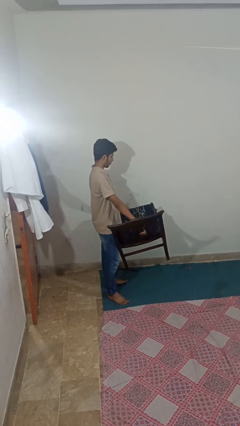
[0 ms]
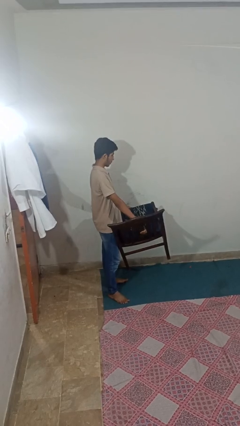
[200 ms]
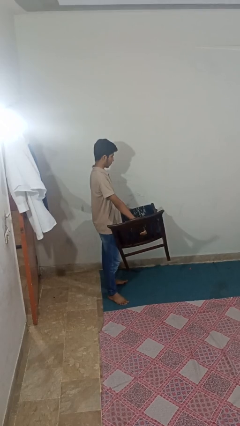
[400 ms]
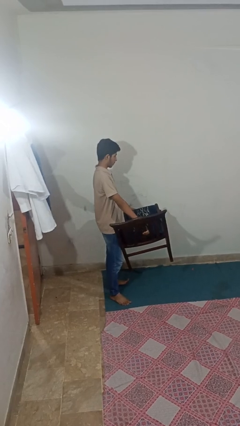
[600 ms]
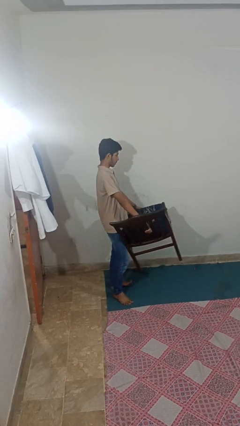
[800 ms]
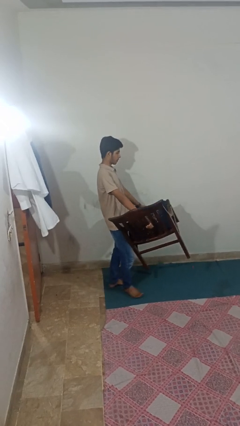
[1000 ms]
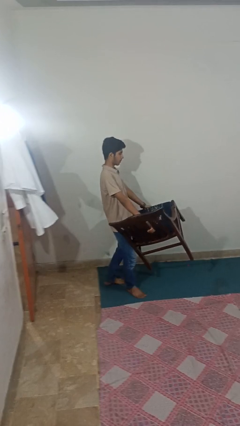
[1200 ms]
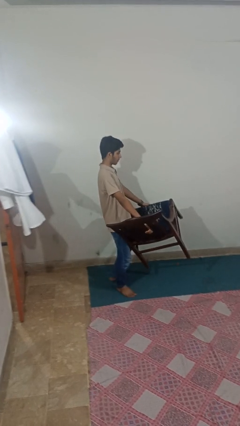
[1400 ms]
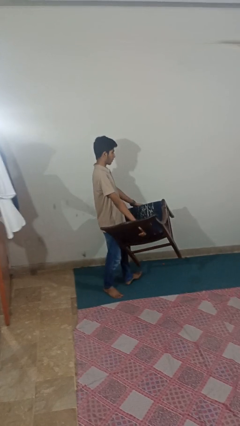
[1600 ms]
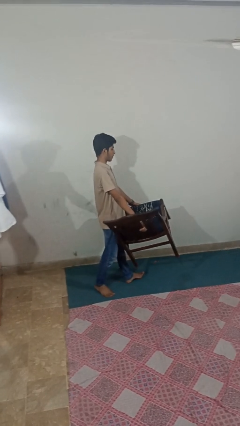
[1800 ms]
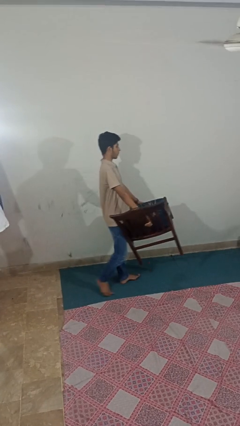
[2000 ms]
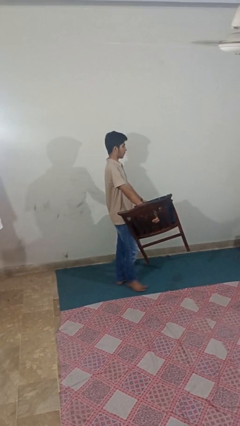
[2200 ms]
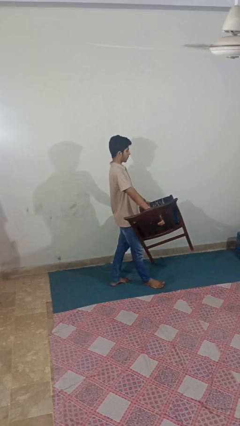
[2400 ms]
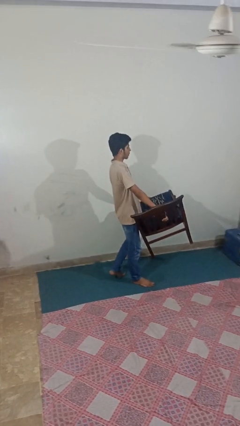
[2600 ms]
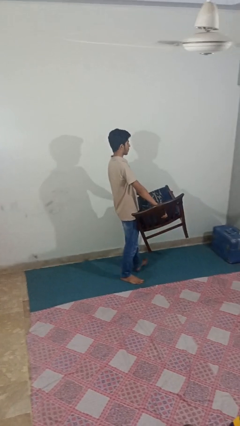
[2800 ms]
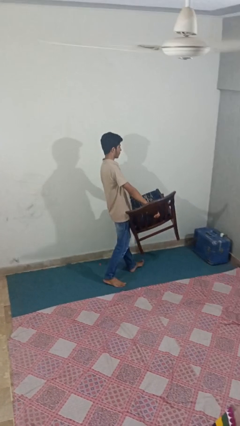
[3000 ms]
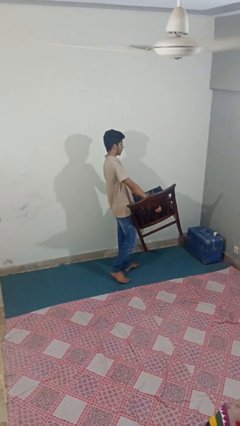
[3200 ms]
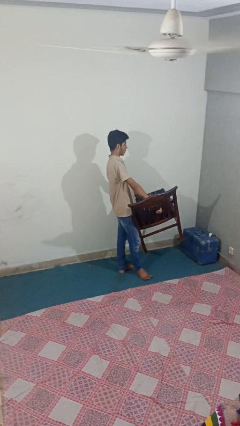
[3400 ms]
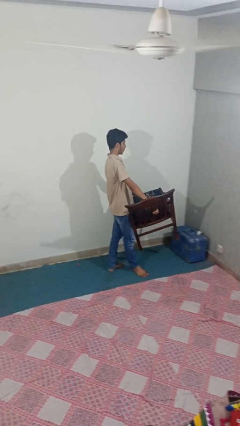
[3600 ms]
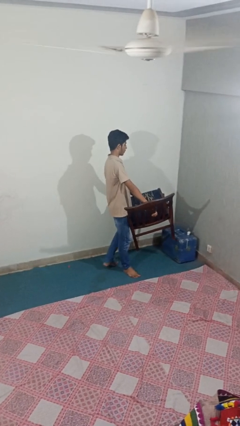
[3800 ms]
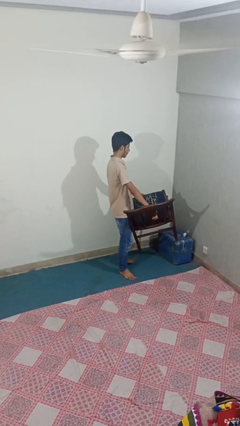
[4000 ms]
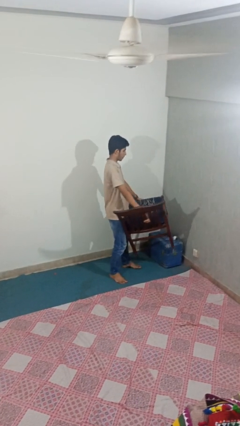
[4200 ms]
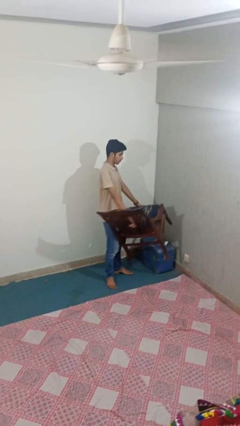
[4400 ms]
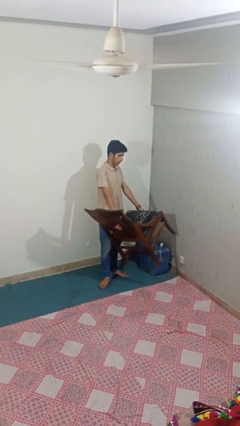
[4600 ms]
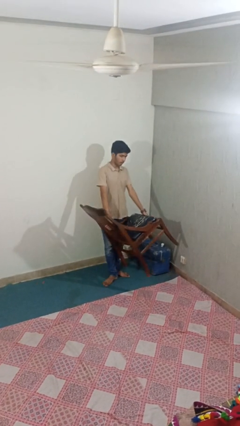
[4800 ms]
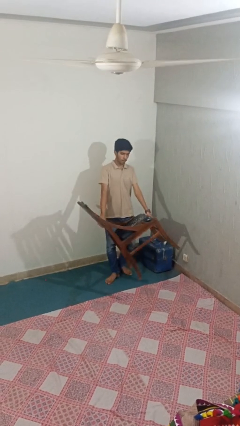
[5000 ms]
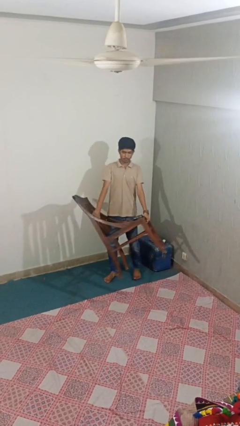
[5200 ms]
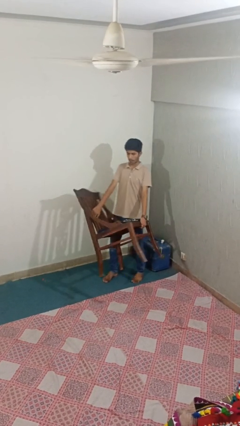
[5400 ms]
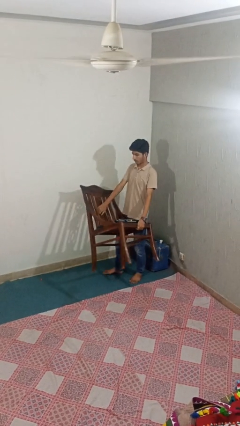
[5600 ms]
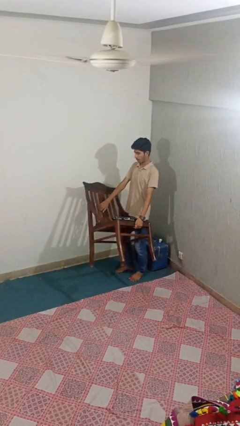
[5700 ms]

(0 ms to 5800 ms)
person carries furniture

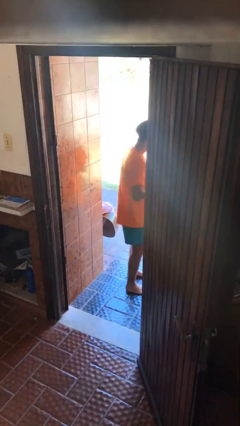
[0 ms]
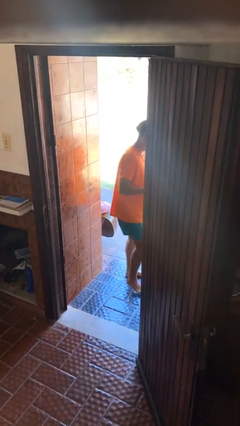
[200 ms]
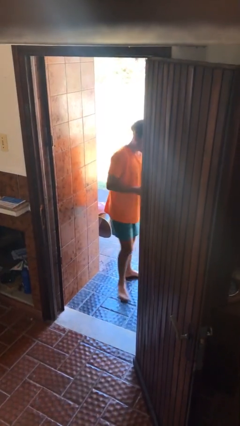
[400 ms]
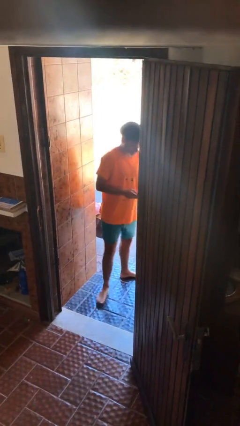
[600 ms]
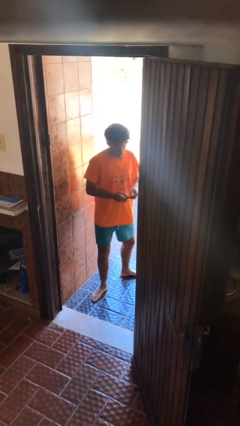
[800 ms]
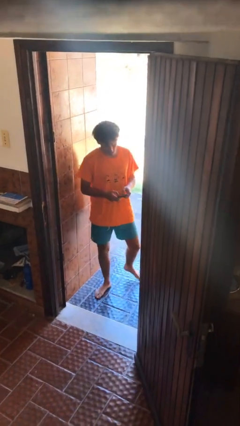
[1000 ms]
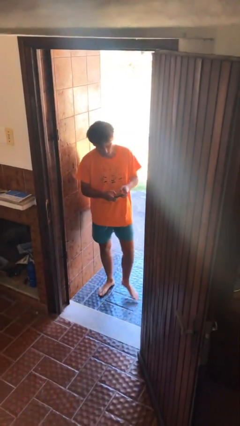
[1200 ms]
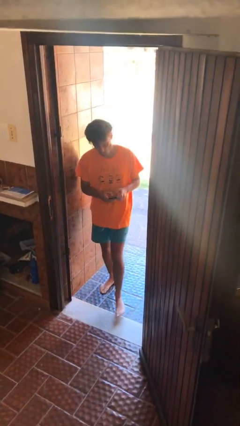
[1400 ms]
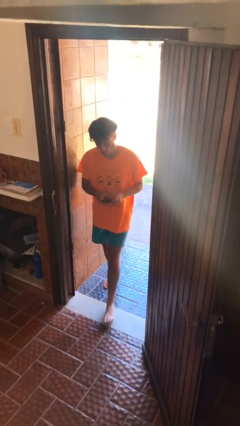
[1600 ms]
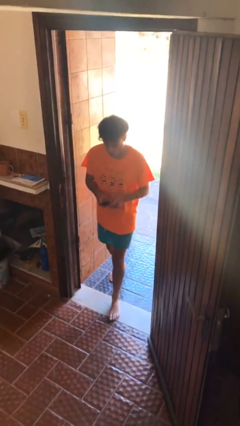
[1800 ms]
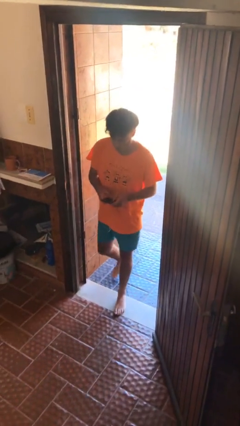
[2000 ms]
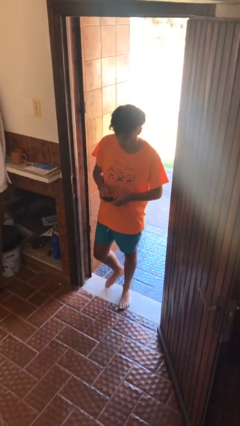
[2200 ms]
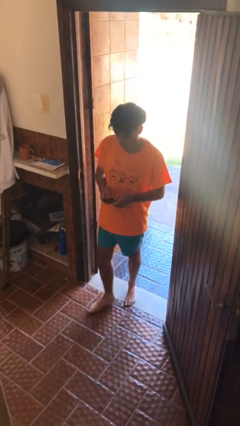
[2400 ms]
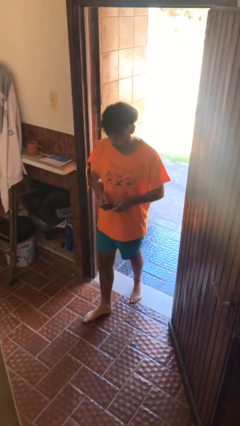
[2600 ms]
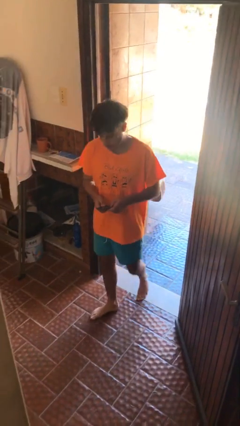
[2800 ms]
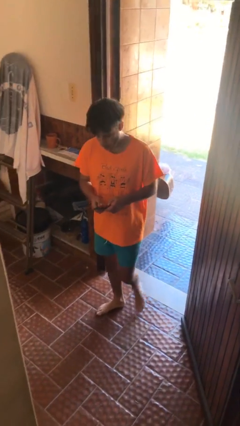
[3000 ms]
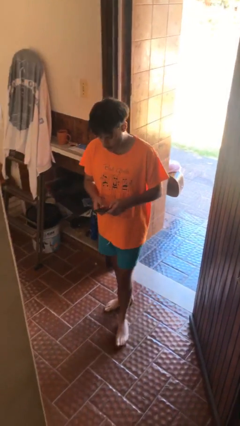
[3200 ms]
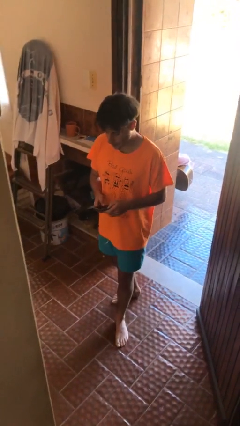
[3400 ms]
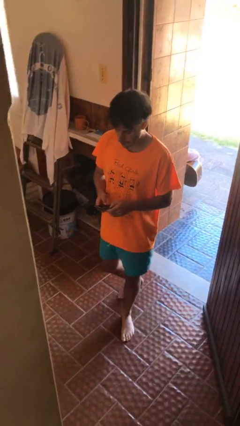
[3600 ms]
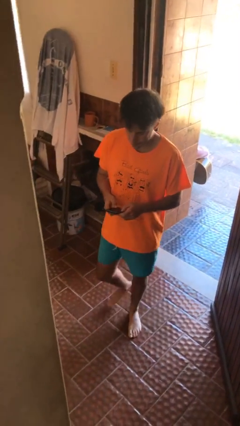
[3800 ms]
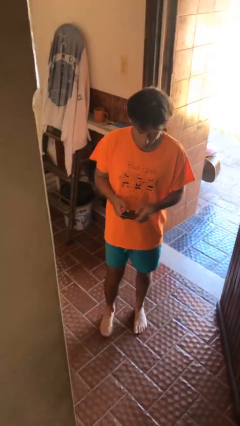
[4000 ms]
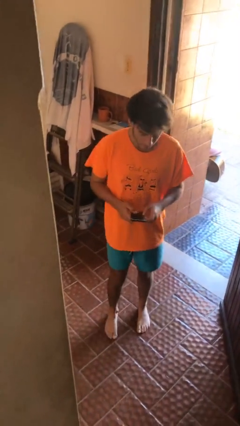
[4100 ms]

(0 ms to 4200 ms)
person enters scene through structure

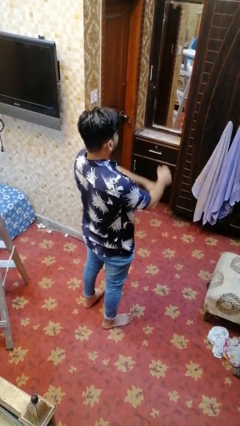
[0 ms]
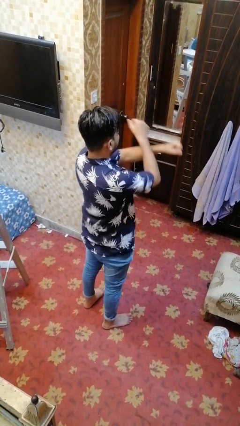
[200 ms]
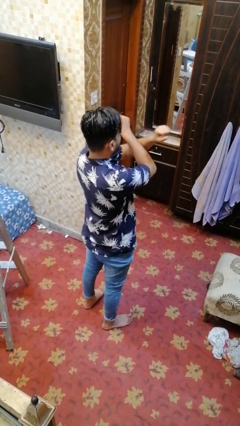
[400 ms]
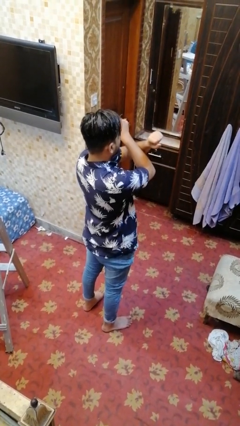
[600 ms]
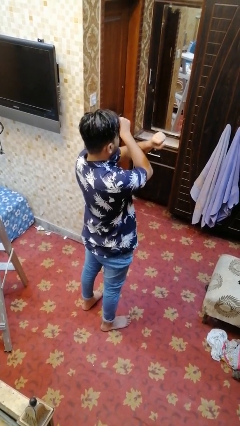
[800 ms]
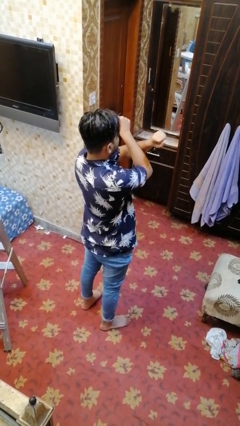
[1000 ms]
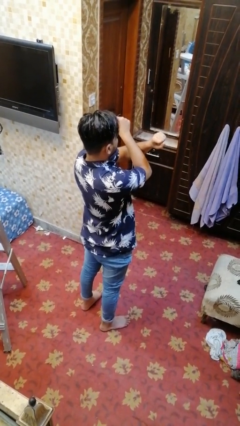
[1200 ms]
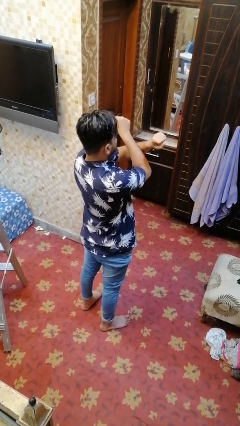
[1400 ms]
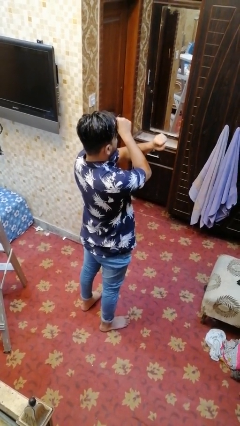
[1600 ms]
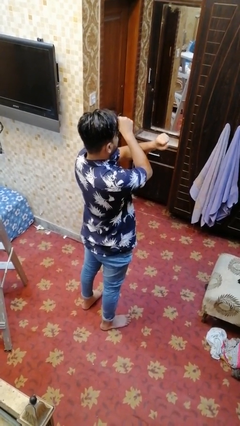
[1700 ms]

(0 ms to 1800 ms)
person crosses arms

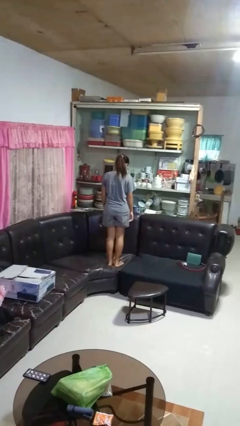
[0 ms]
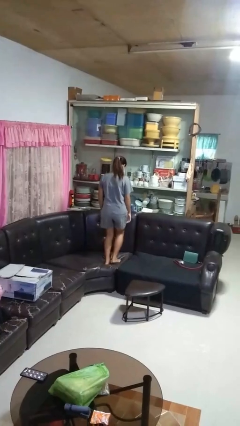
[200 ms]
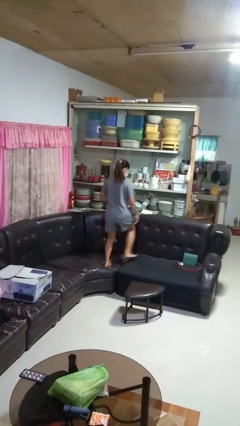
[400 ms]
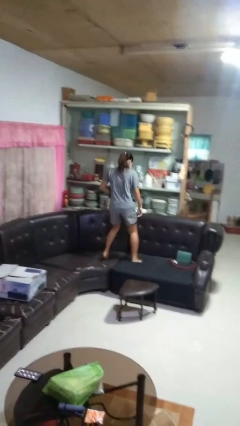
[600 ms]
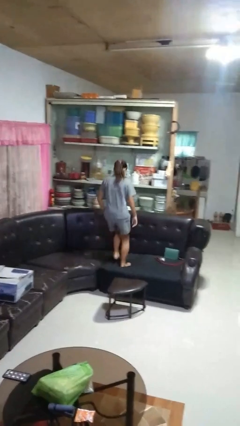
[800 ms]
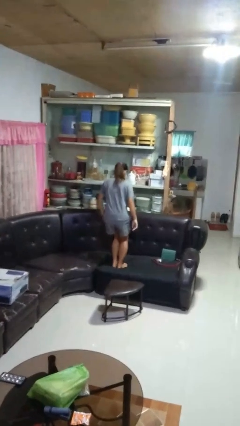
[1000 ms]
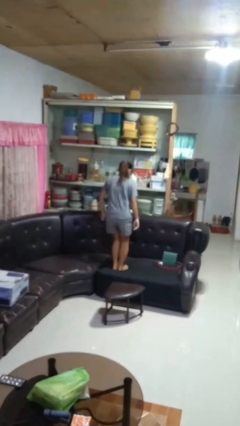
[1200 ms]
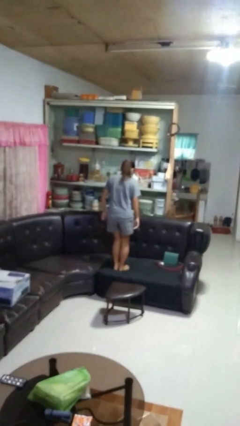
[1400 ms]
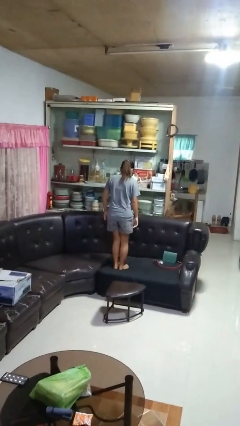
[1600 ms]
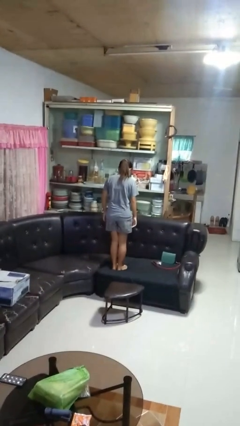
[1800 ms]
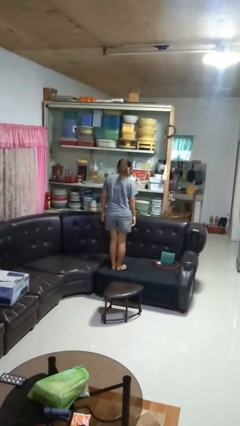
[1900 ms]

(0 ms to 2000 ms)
person jumps on couch

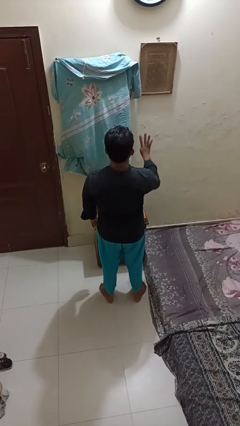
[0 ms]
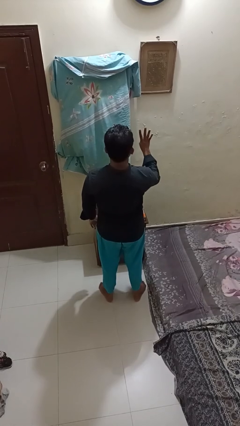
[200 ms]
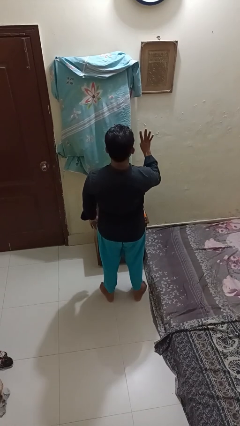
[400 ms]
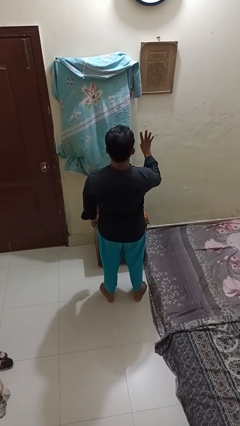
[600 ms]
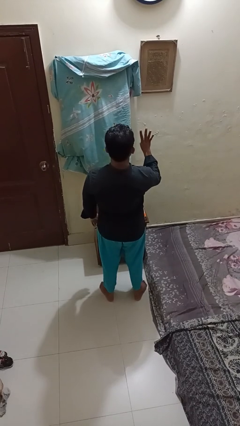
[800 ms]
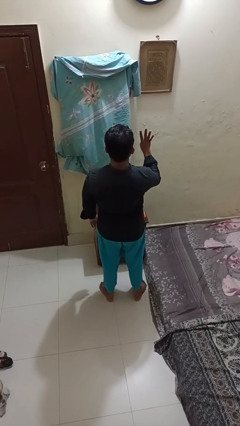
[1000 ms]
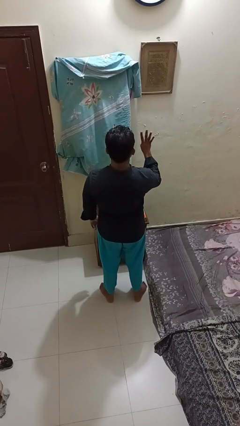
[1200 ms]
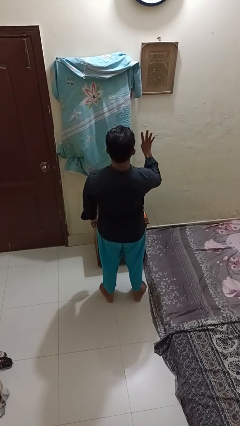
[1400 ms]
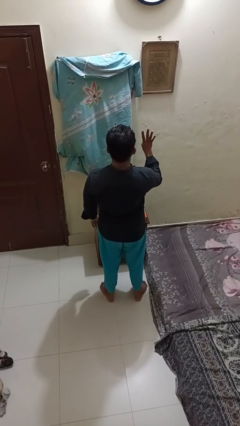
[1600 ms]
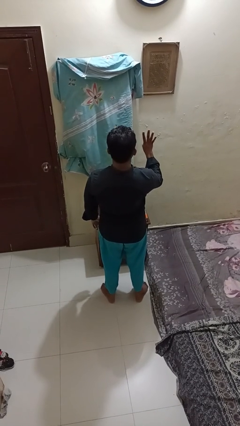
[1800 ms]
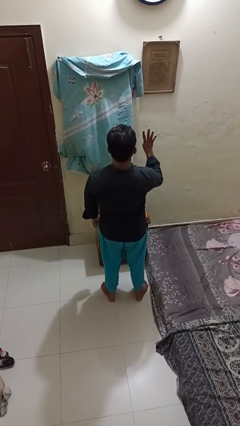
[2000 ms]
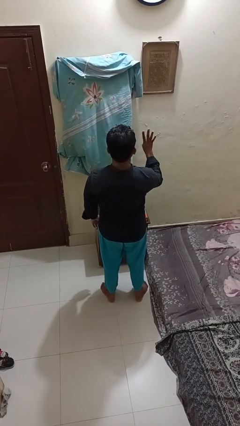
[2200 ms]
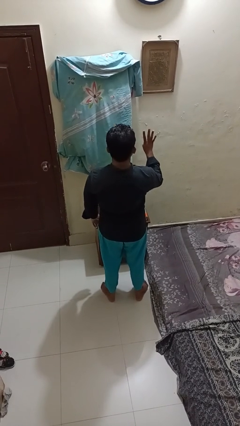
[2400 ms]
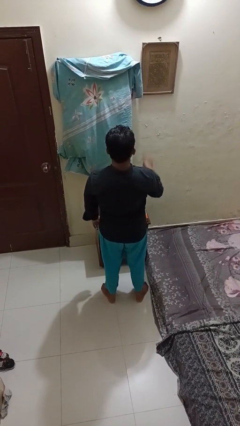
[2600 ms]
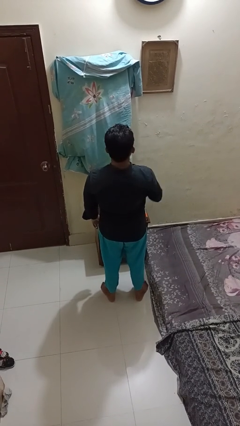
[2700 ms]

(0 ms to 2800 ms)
person gestures number four

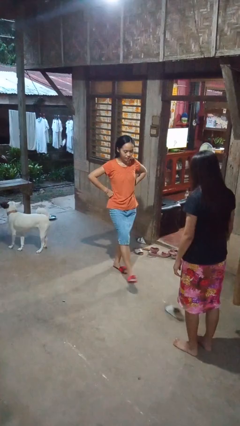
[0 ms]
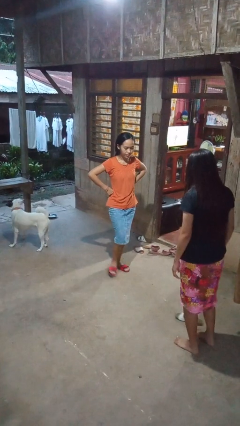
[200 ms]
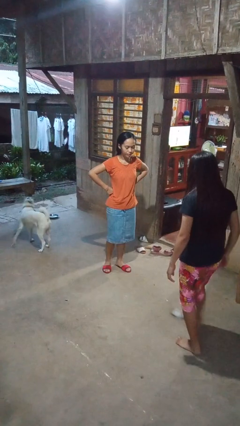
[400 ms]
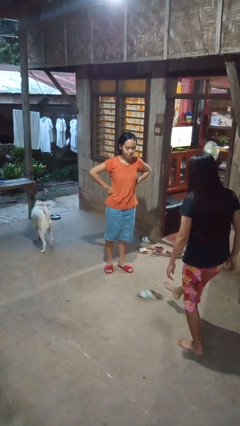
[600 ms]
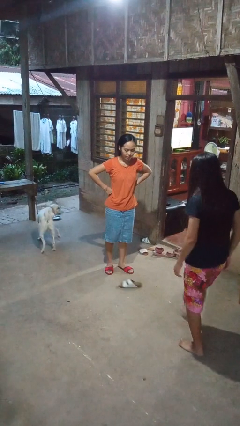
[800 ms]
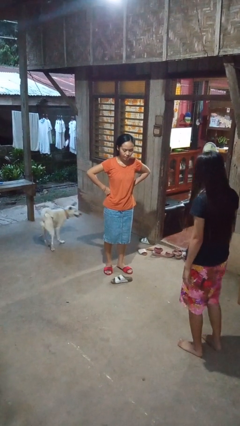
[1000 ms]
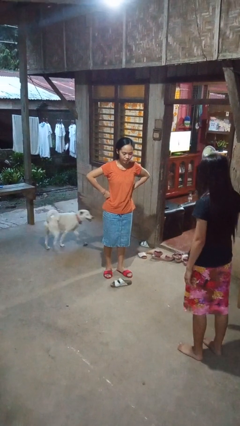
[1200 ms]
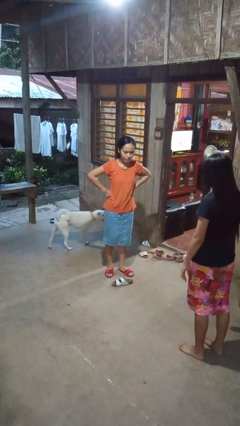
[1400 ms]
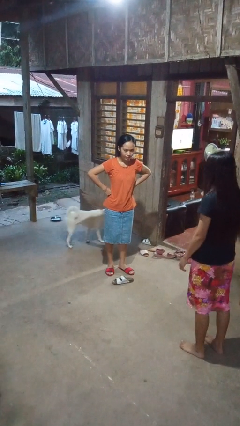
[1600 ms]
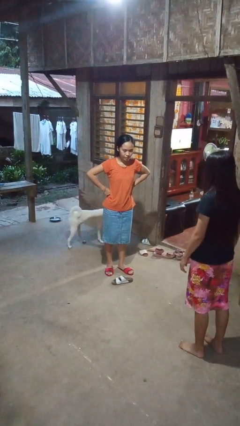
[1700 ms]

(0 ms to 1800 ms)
person kicks object to person
